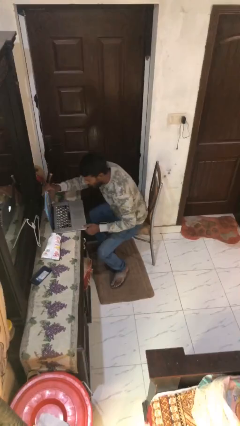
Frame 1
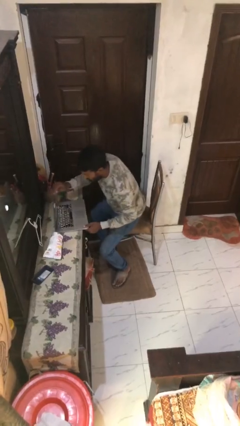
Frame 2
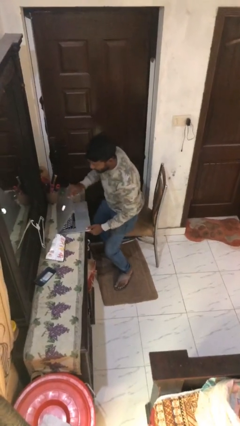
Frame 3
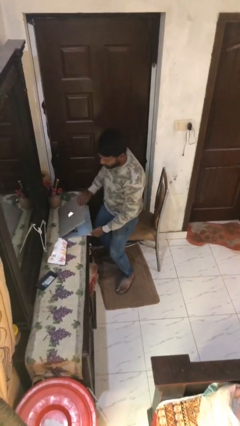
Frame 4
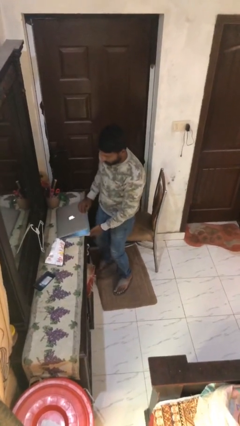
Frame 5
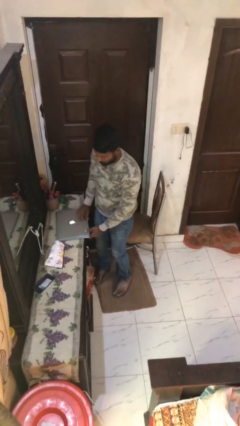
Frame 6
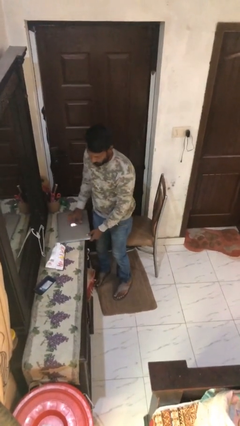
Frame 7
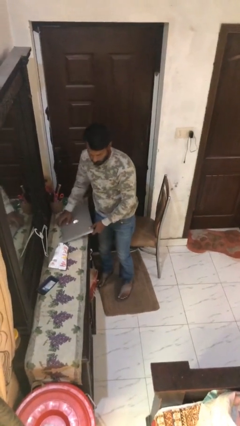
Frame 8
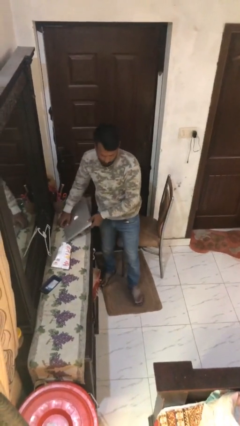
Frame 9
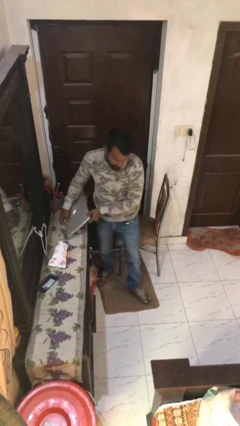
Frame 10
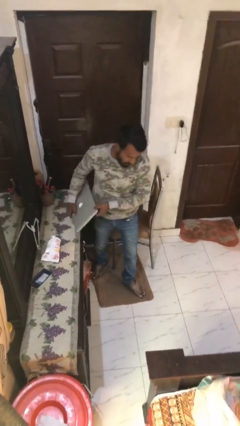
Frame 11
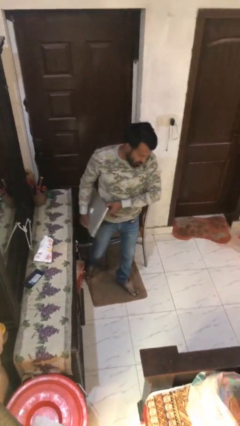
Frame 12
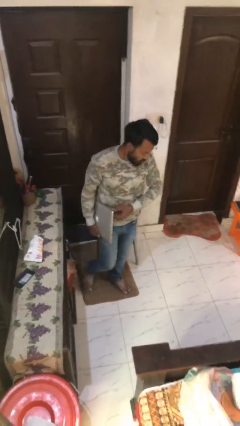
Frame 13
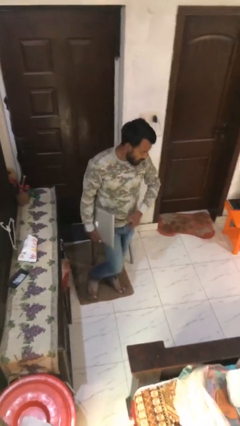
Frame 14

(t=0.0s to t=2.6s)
person stands up

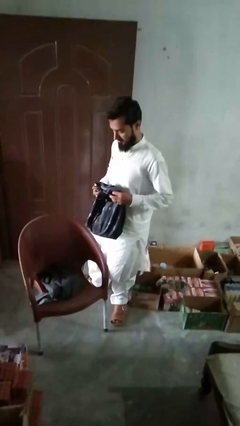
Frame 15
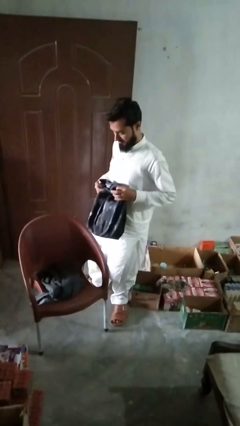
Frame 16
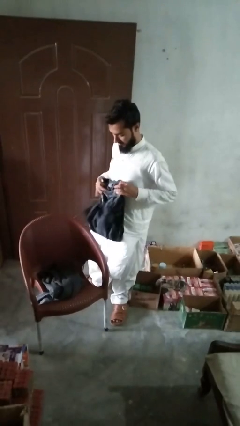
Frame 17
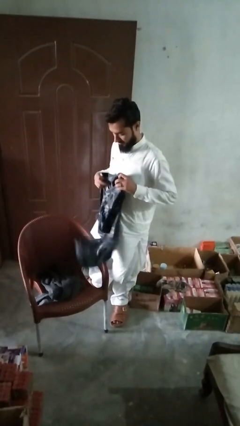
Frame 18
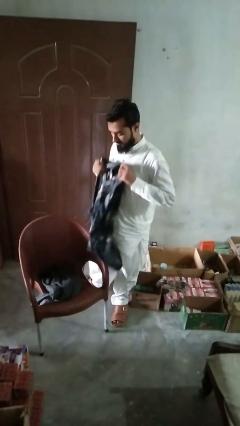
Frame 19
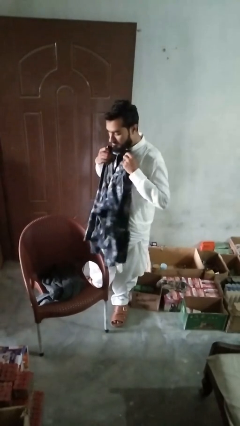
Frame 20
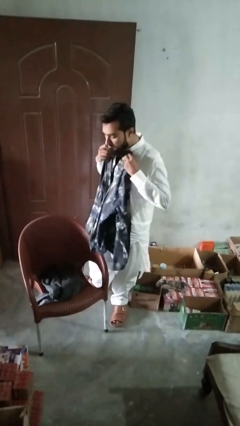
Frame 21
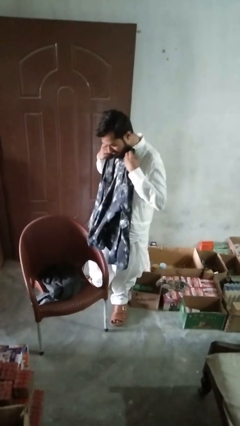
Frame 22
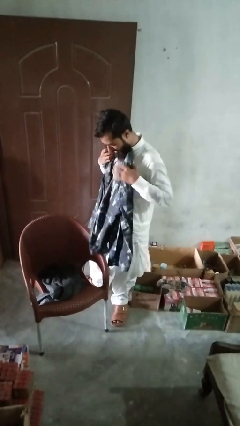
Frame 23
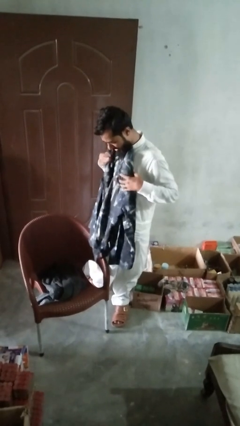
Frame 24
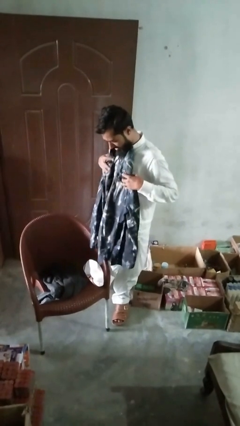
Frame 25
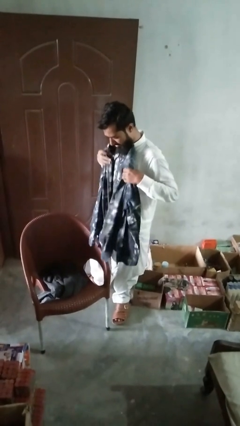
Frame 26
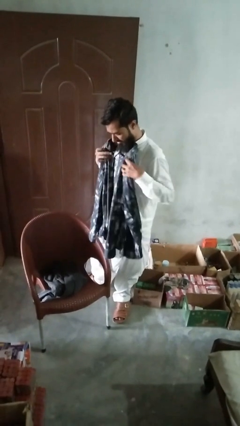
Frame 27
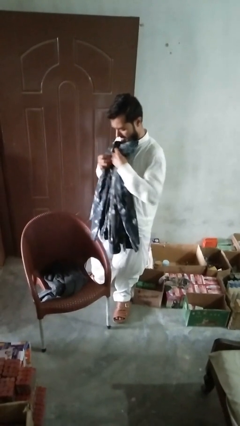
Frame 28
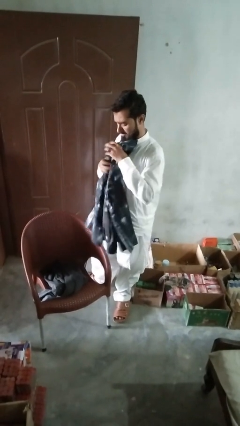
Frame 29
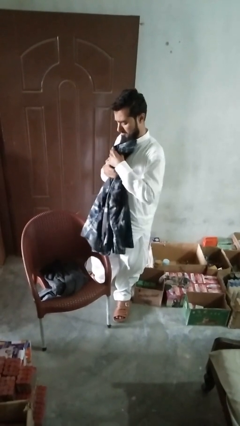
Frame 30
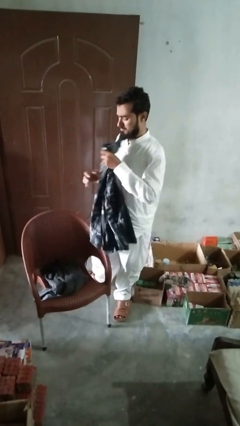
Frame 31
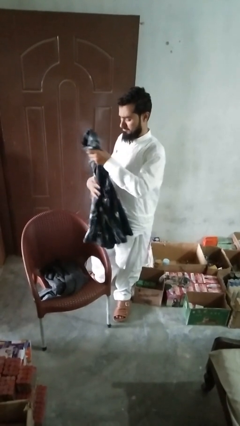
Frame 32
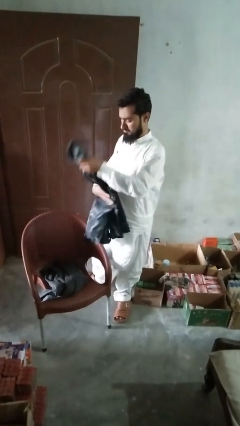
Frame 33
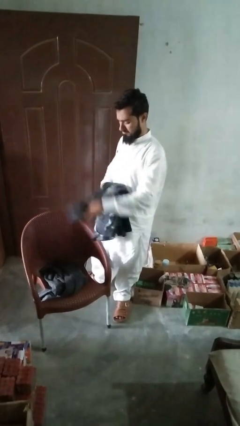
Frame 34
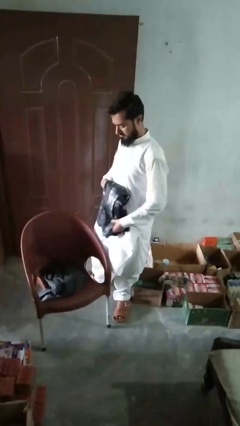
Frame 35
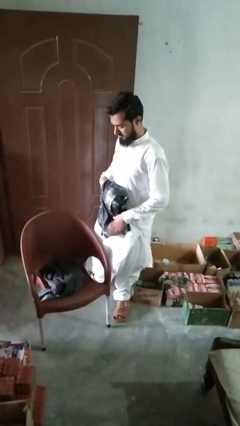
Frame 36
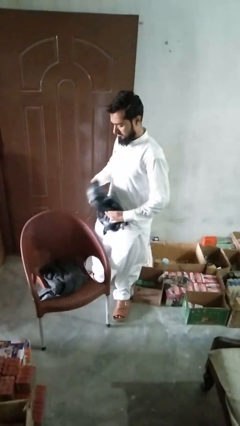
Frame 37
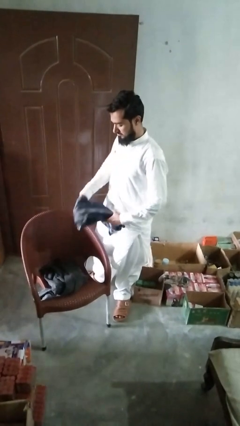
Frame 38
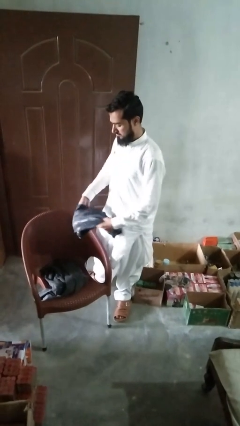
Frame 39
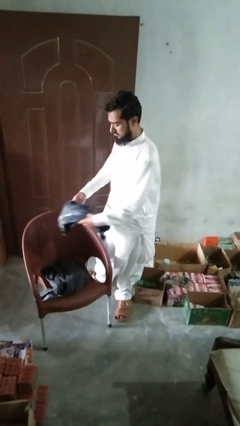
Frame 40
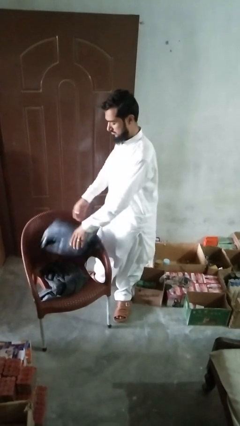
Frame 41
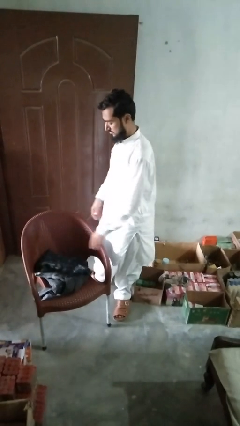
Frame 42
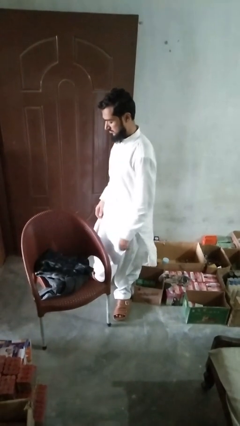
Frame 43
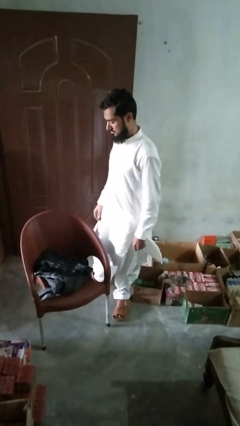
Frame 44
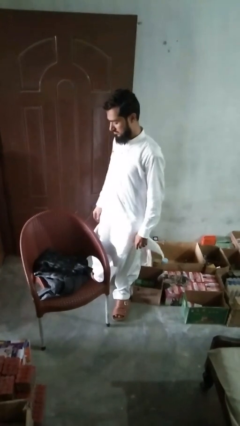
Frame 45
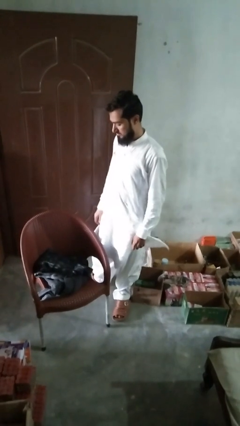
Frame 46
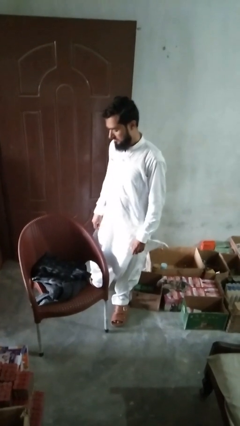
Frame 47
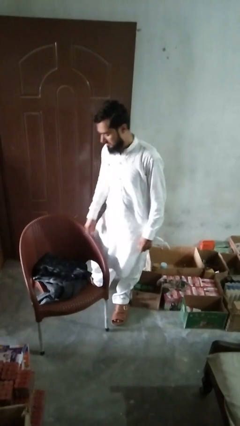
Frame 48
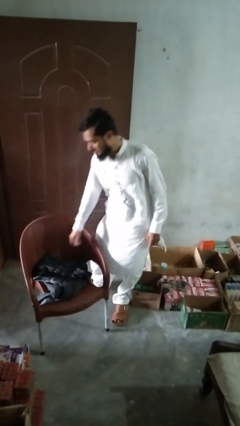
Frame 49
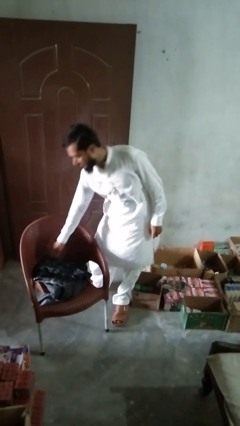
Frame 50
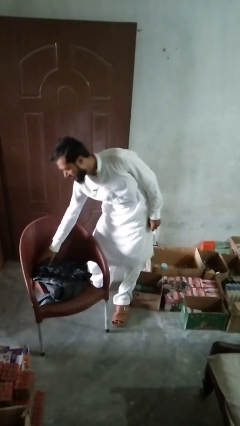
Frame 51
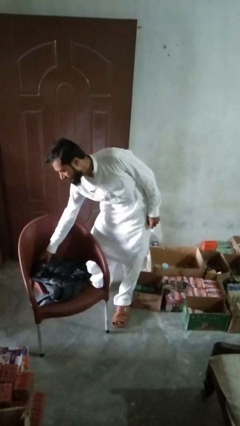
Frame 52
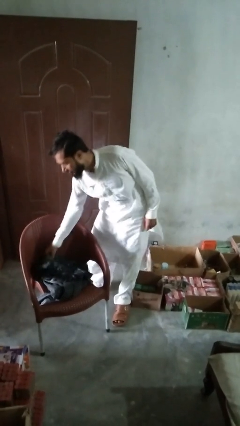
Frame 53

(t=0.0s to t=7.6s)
person folds shirt

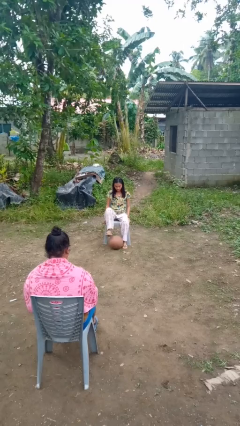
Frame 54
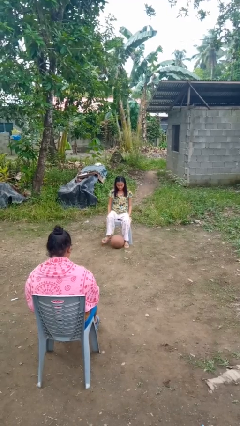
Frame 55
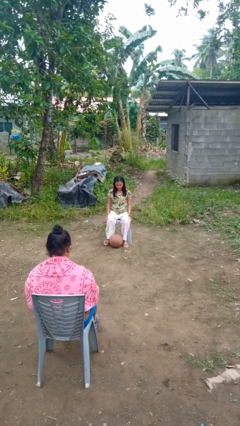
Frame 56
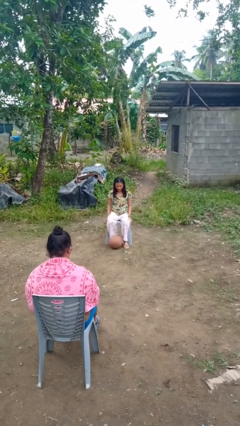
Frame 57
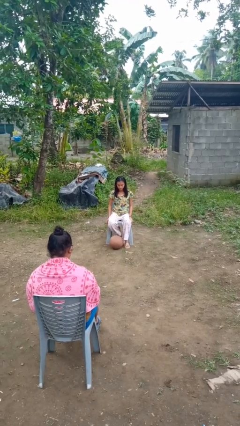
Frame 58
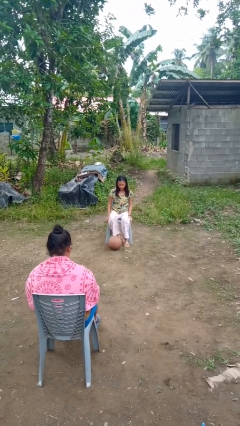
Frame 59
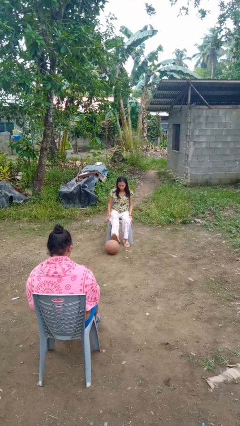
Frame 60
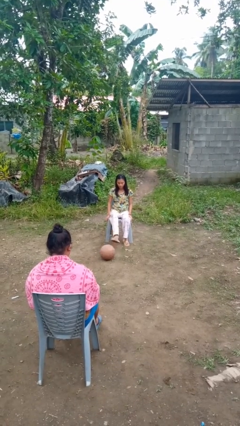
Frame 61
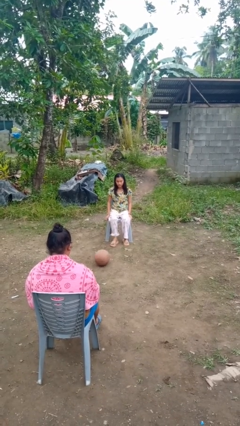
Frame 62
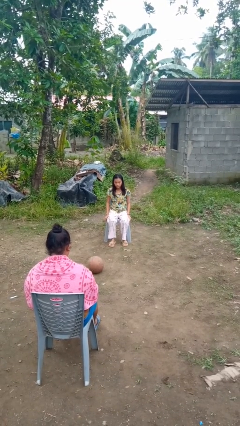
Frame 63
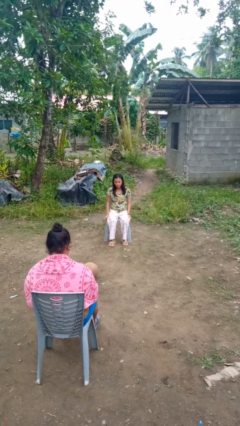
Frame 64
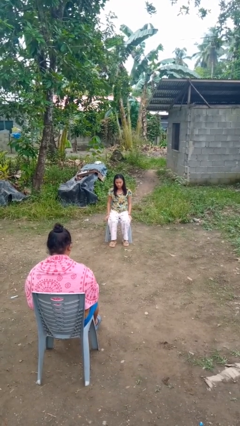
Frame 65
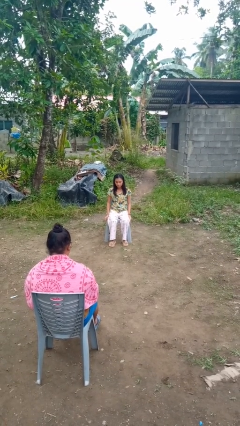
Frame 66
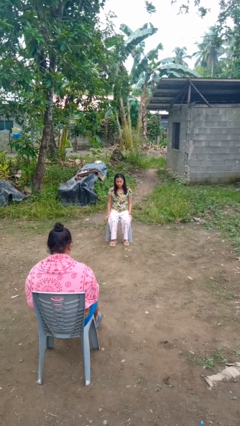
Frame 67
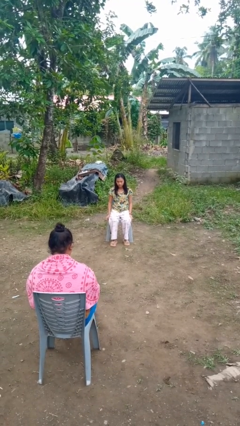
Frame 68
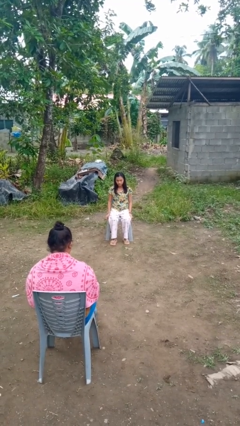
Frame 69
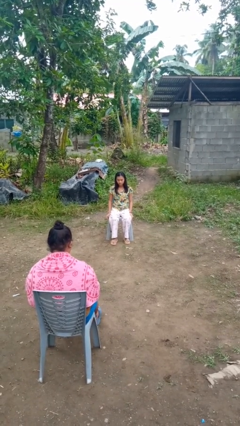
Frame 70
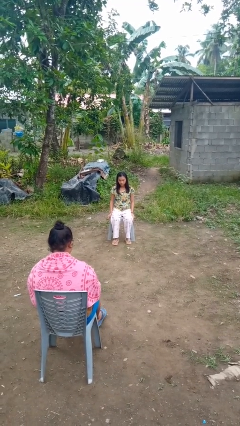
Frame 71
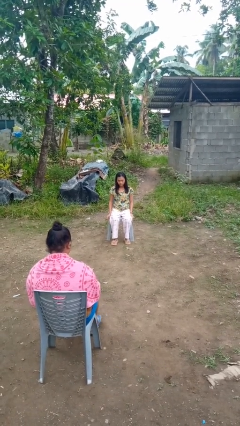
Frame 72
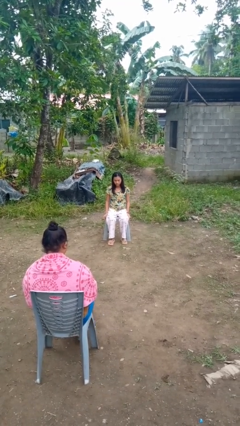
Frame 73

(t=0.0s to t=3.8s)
person kicks object to person

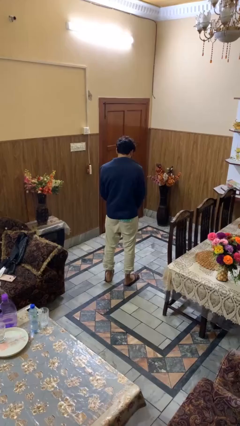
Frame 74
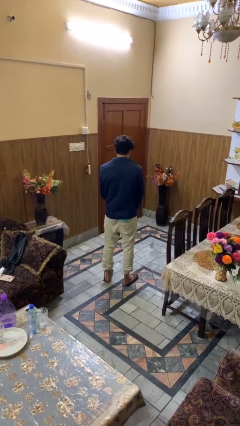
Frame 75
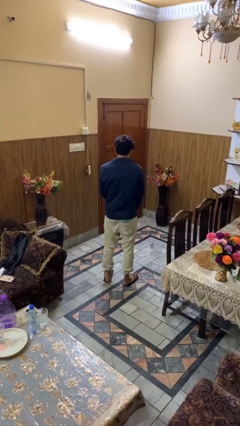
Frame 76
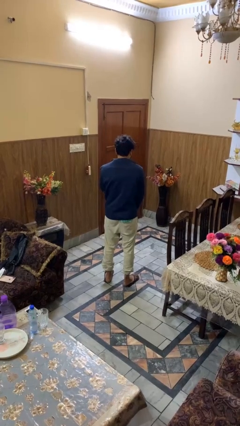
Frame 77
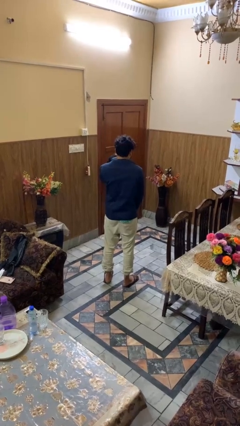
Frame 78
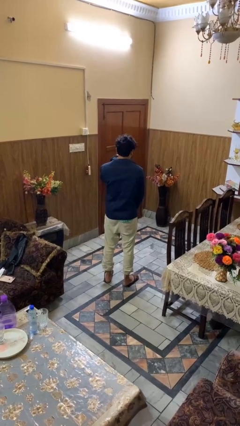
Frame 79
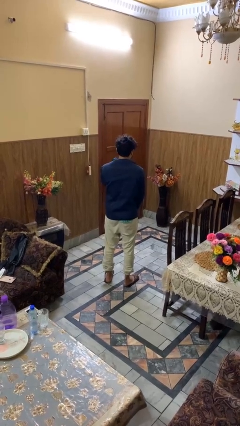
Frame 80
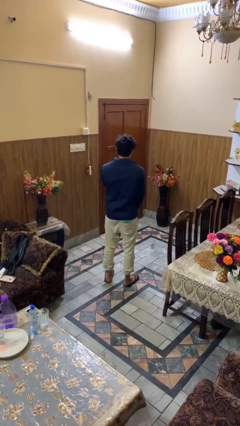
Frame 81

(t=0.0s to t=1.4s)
person zips up jacket

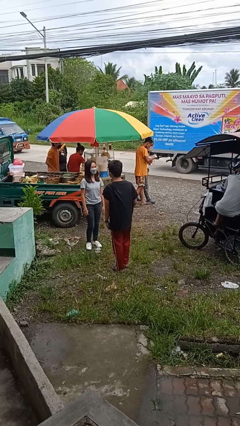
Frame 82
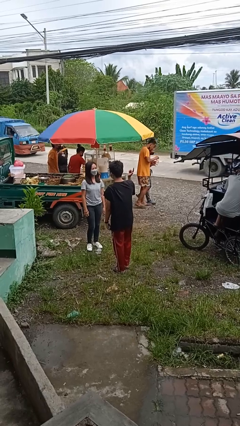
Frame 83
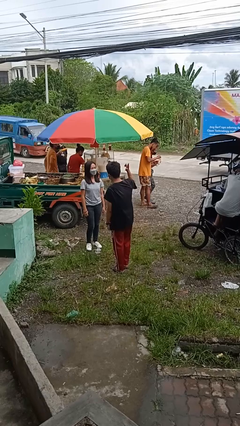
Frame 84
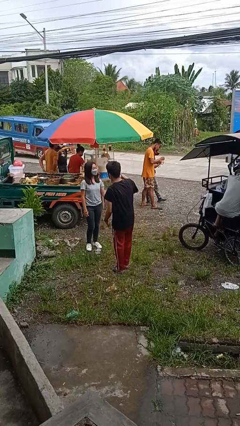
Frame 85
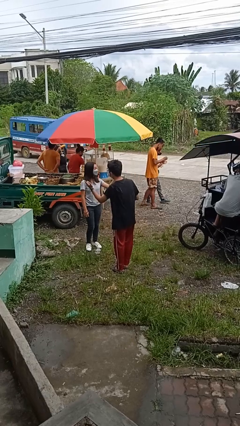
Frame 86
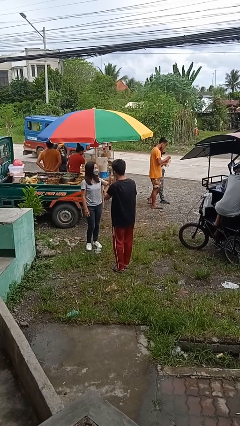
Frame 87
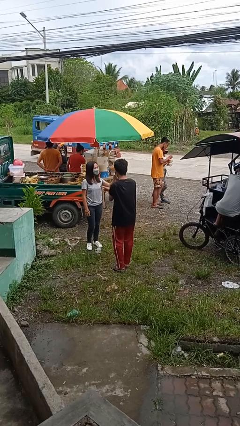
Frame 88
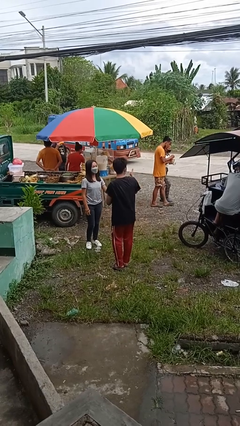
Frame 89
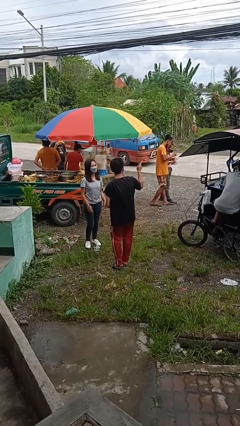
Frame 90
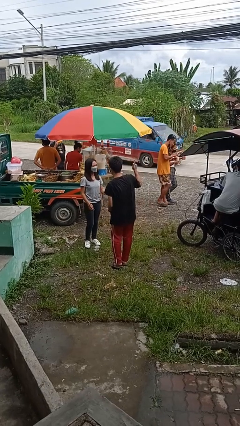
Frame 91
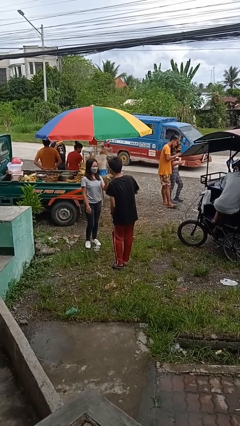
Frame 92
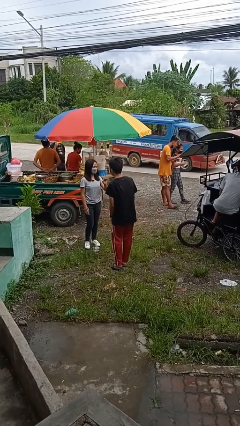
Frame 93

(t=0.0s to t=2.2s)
person talks to person
